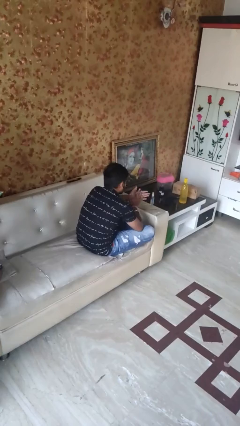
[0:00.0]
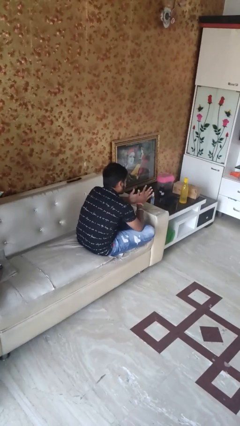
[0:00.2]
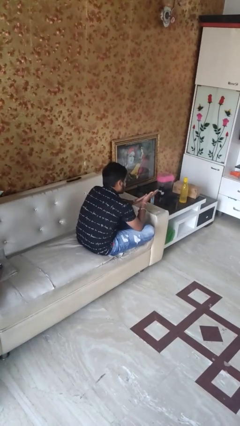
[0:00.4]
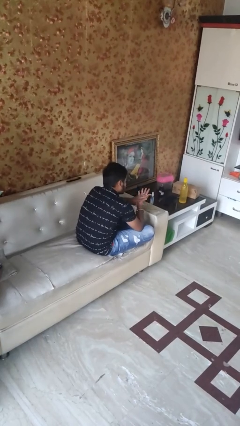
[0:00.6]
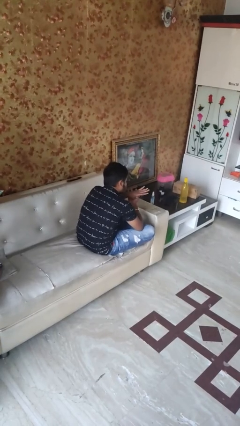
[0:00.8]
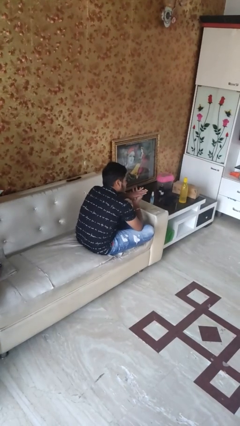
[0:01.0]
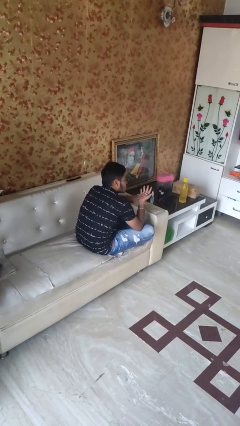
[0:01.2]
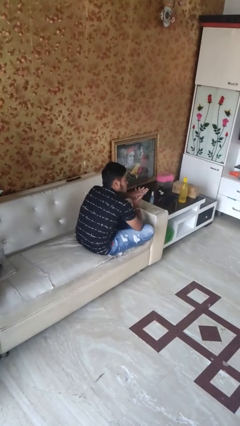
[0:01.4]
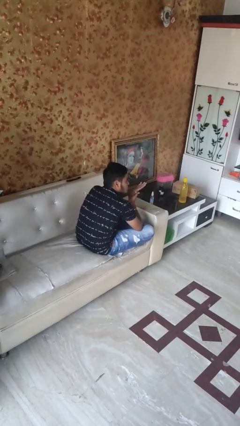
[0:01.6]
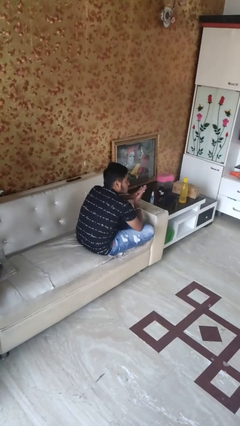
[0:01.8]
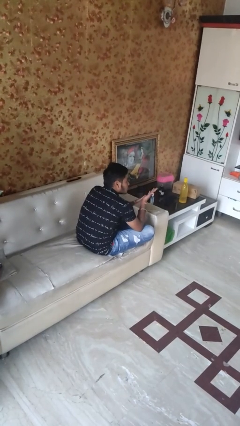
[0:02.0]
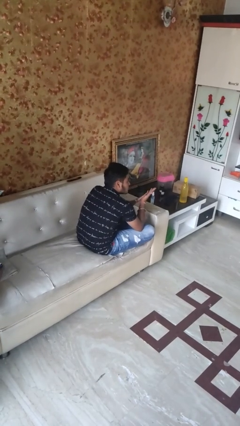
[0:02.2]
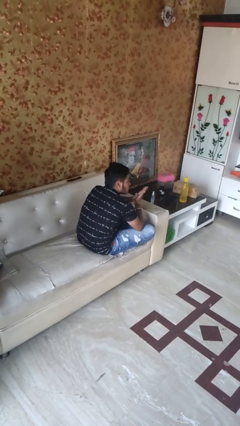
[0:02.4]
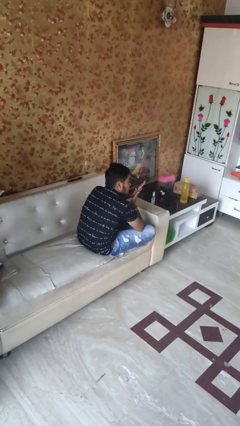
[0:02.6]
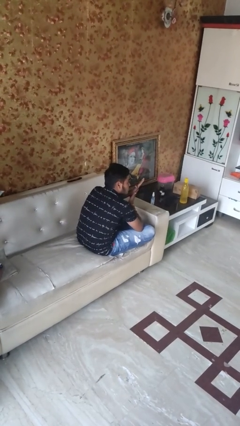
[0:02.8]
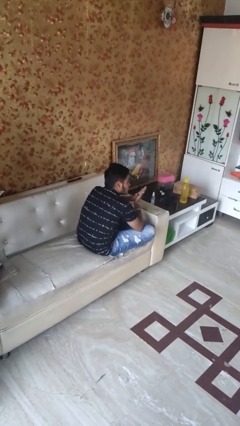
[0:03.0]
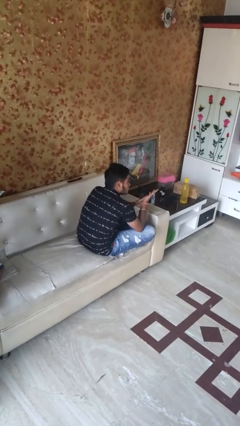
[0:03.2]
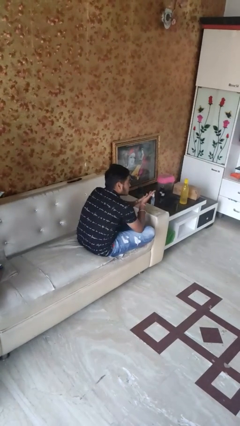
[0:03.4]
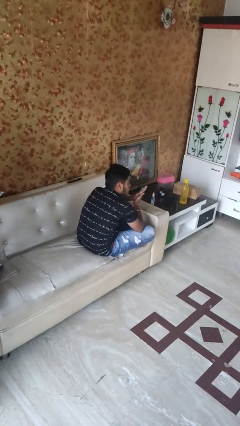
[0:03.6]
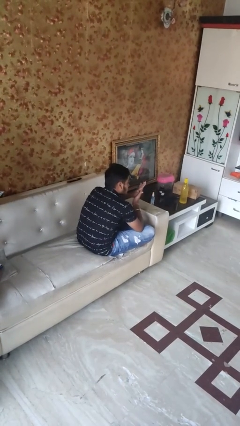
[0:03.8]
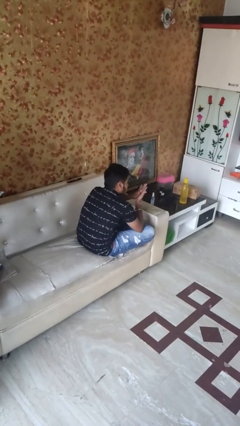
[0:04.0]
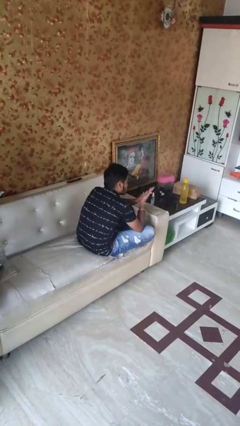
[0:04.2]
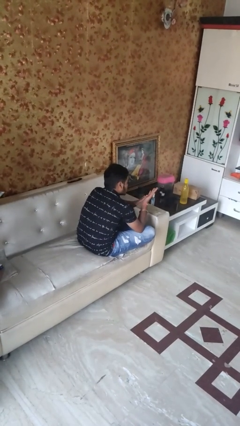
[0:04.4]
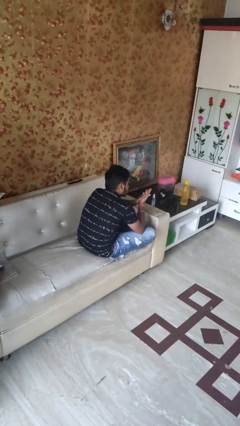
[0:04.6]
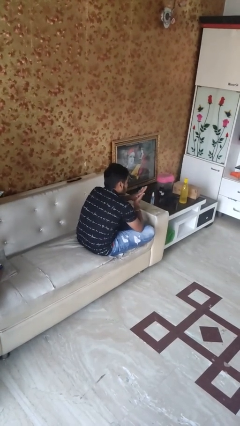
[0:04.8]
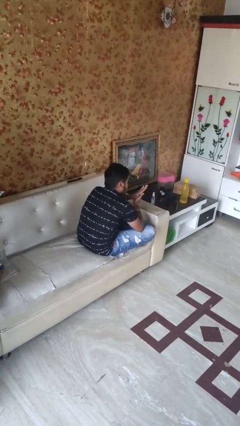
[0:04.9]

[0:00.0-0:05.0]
person looks at hands in lap

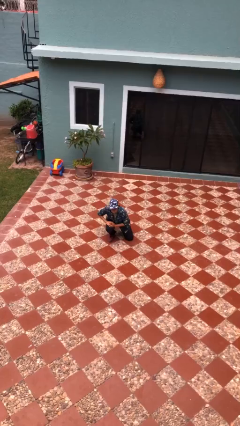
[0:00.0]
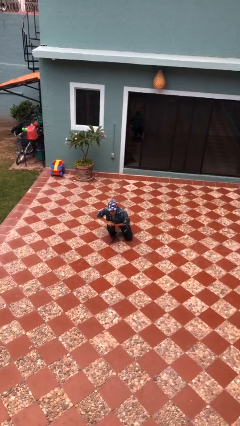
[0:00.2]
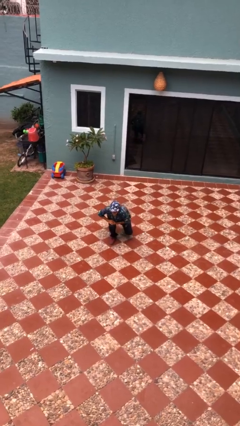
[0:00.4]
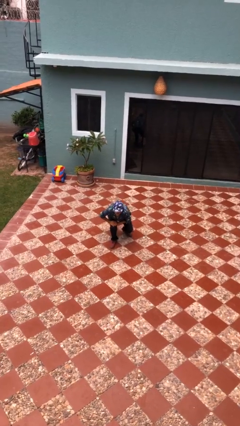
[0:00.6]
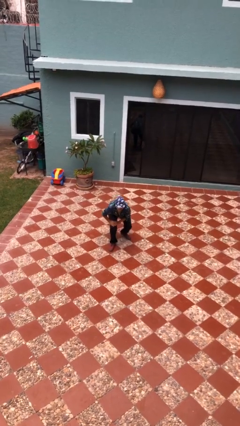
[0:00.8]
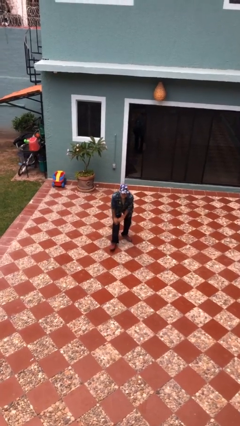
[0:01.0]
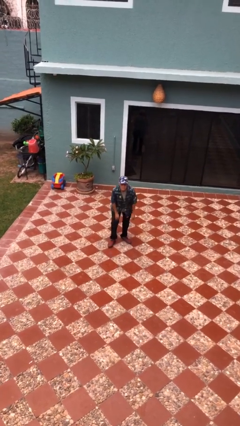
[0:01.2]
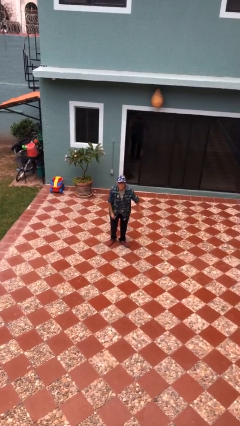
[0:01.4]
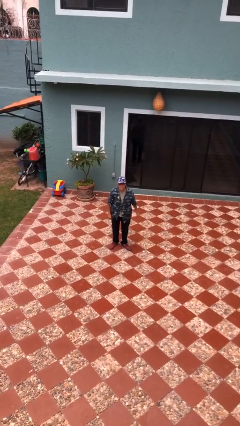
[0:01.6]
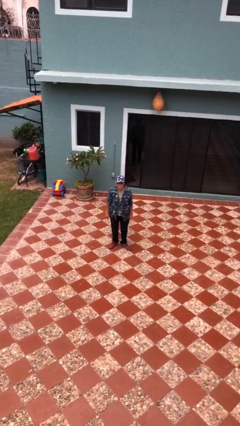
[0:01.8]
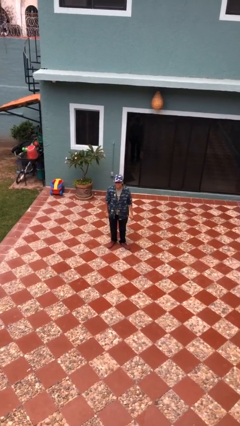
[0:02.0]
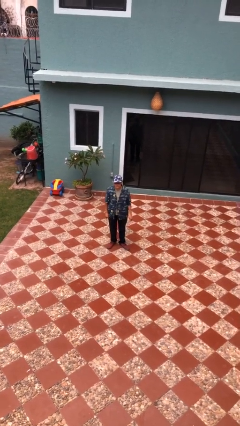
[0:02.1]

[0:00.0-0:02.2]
person stands up from floor

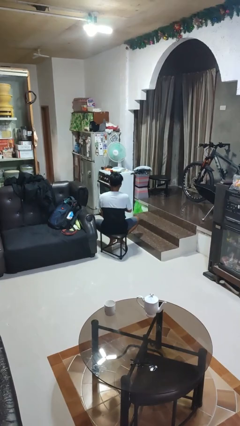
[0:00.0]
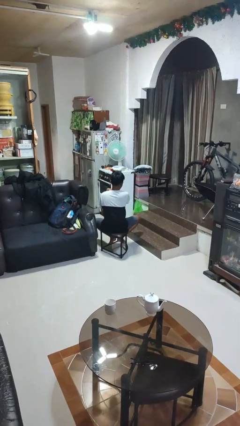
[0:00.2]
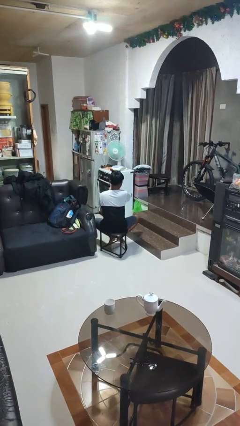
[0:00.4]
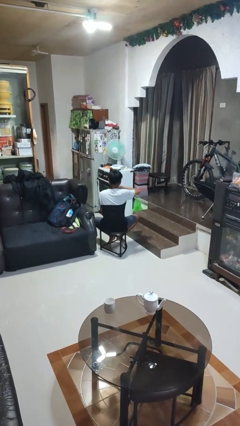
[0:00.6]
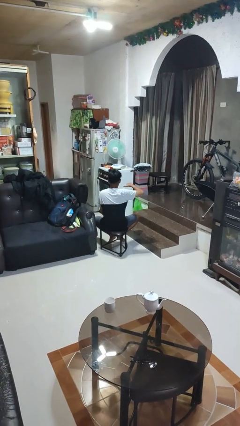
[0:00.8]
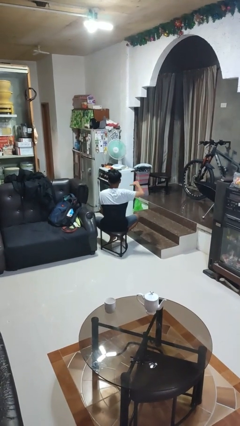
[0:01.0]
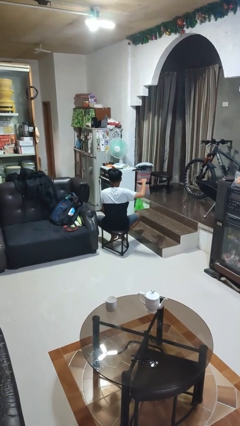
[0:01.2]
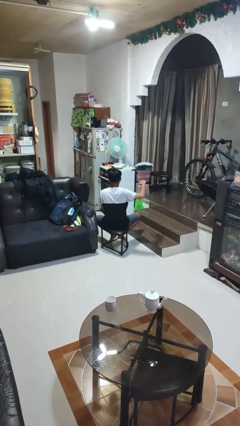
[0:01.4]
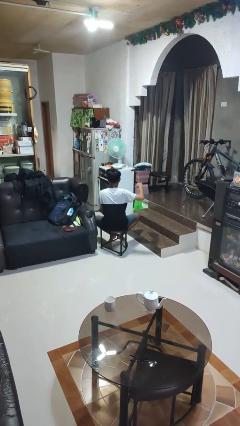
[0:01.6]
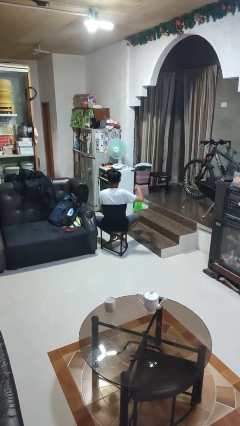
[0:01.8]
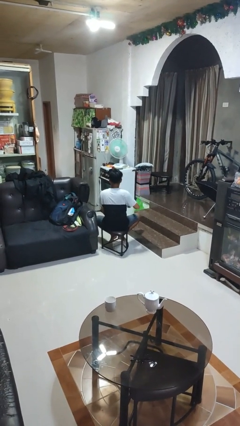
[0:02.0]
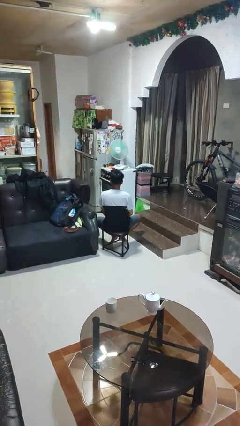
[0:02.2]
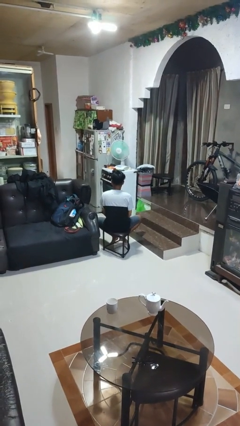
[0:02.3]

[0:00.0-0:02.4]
person gestures cut

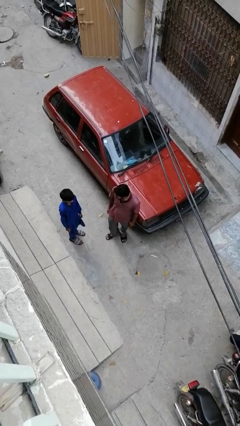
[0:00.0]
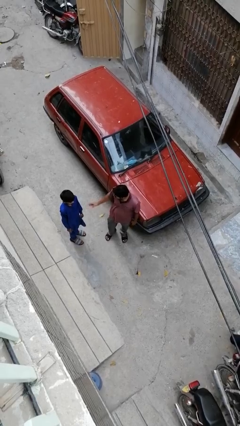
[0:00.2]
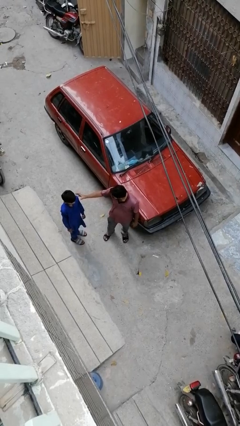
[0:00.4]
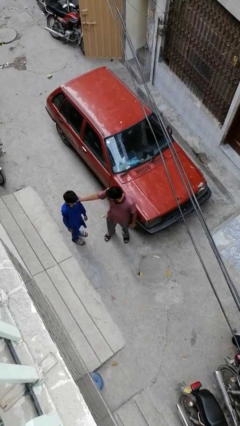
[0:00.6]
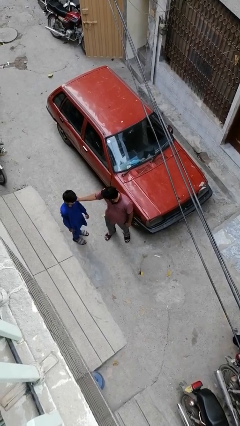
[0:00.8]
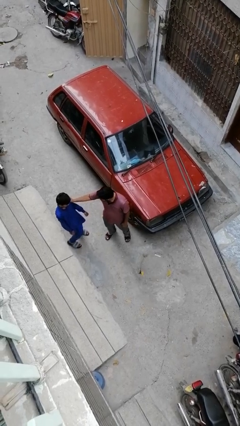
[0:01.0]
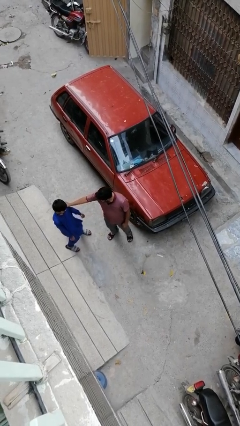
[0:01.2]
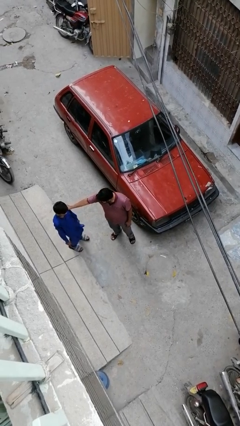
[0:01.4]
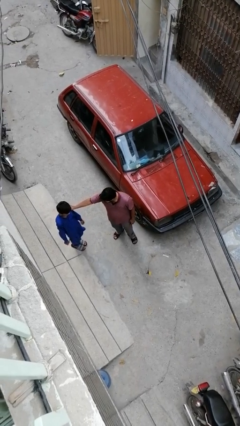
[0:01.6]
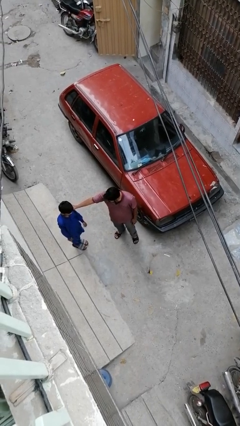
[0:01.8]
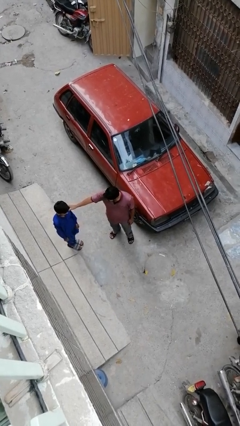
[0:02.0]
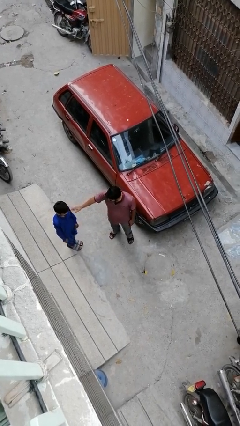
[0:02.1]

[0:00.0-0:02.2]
person grabs person by bicep

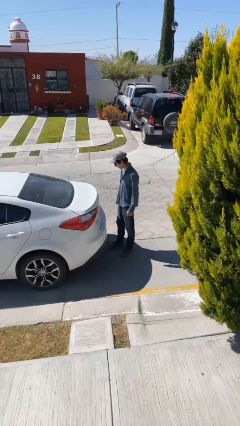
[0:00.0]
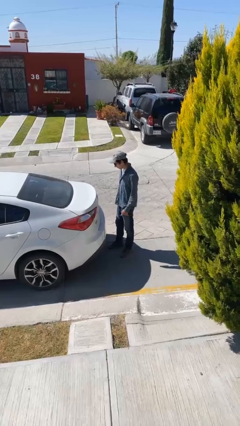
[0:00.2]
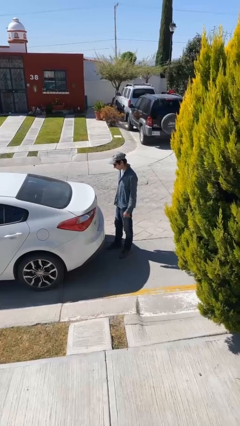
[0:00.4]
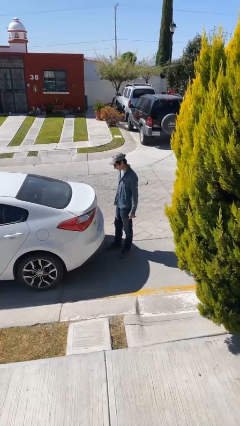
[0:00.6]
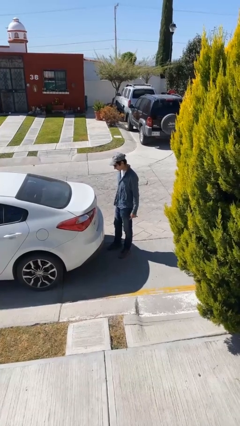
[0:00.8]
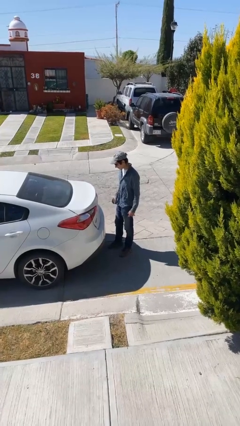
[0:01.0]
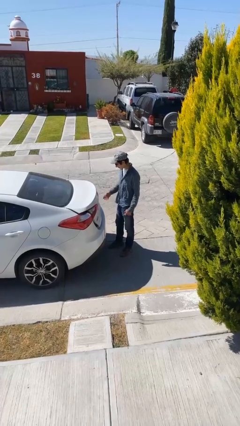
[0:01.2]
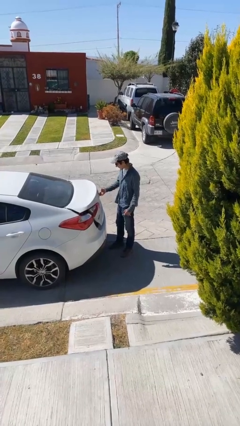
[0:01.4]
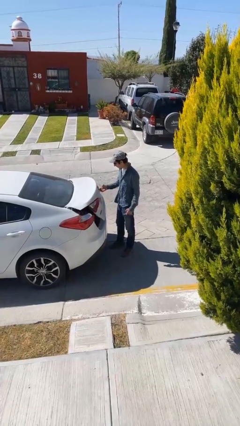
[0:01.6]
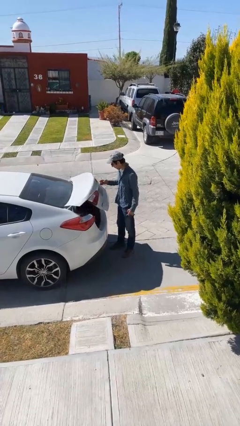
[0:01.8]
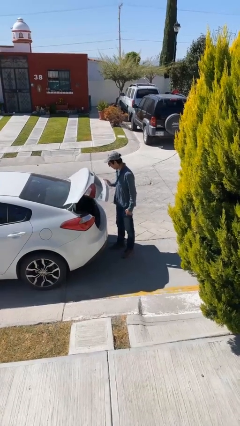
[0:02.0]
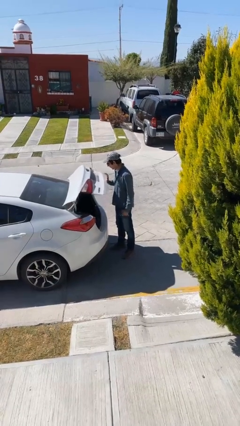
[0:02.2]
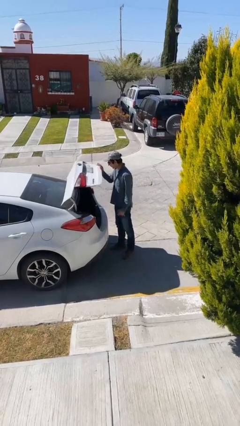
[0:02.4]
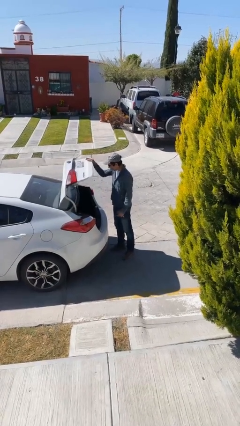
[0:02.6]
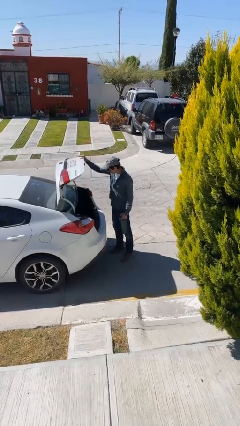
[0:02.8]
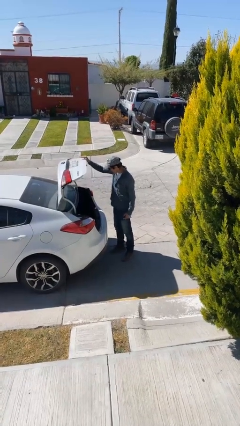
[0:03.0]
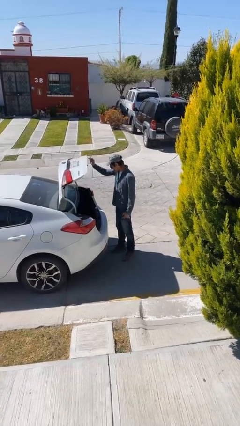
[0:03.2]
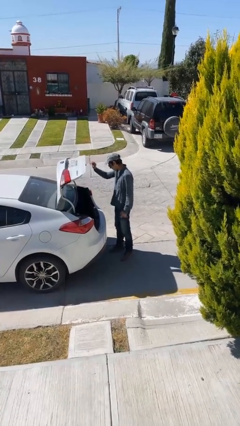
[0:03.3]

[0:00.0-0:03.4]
person opens car trunk

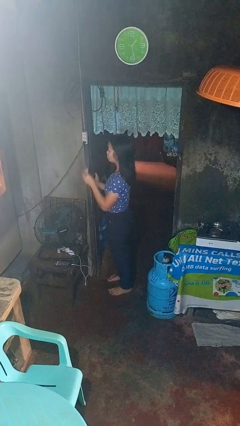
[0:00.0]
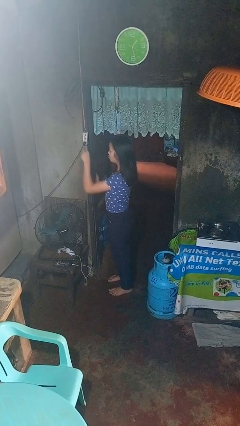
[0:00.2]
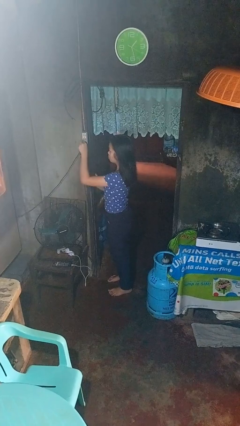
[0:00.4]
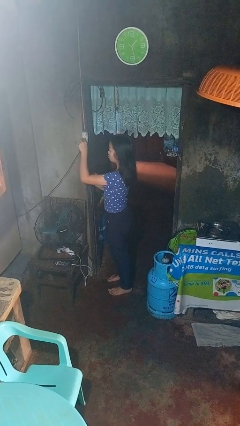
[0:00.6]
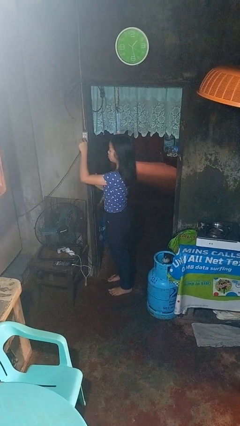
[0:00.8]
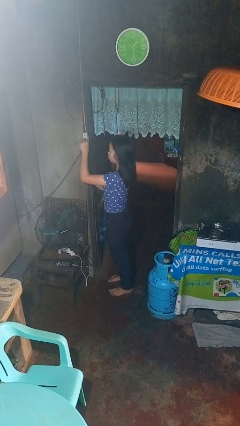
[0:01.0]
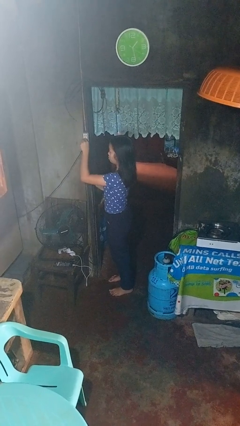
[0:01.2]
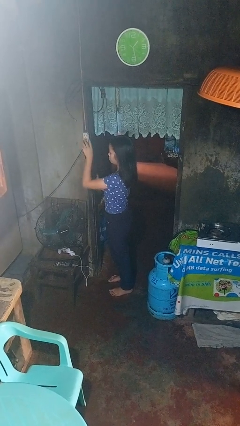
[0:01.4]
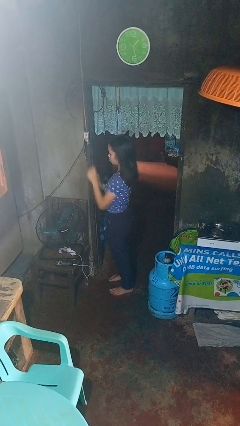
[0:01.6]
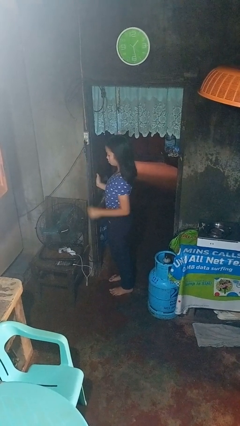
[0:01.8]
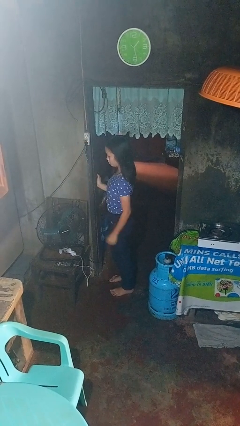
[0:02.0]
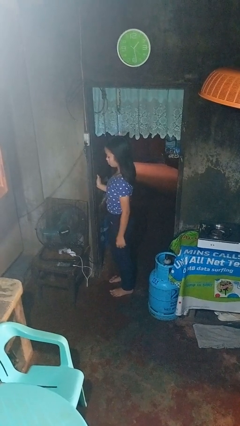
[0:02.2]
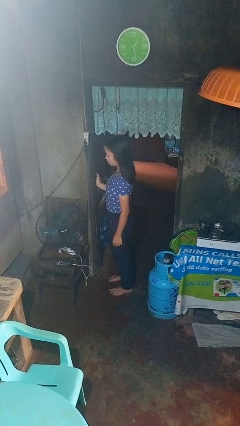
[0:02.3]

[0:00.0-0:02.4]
person plugs into electrical socket
